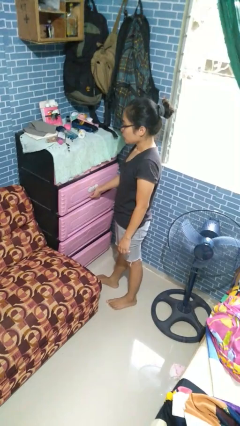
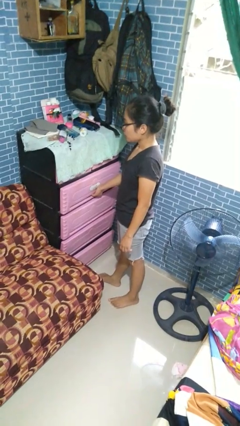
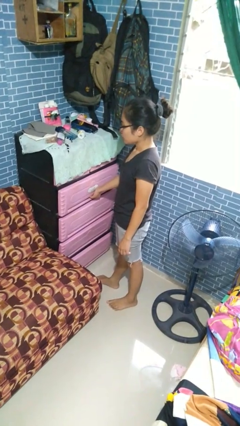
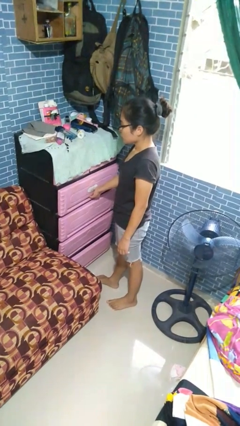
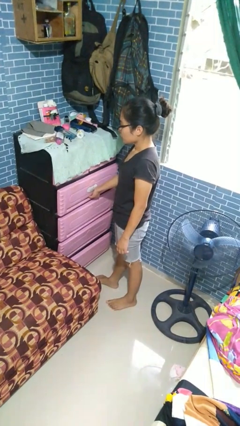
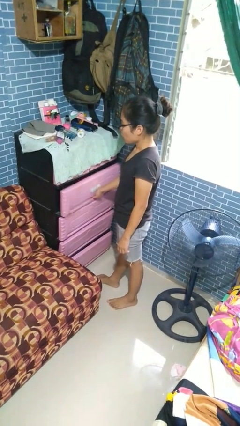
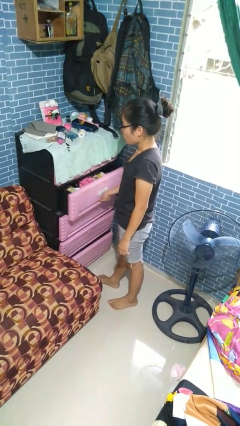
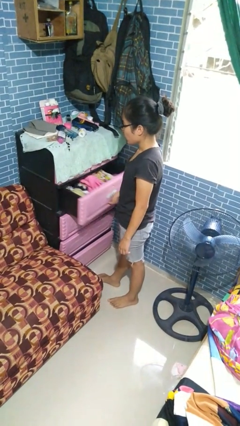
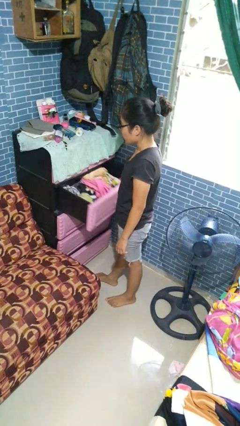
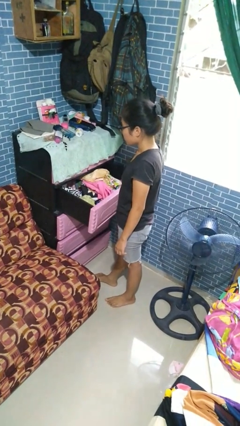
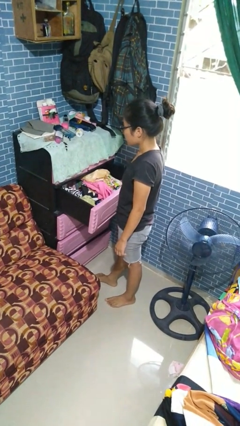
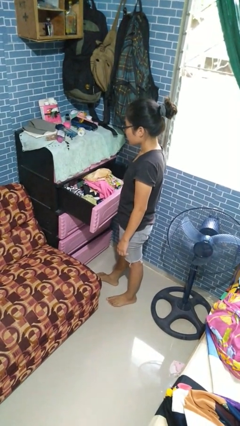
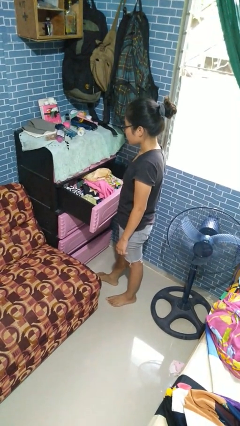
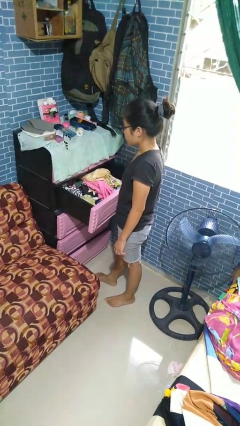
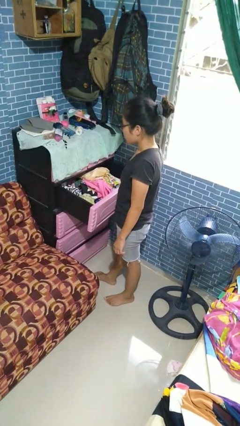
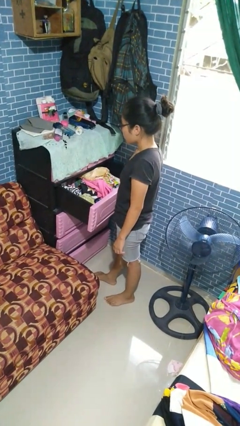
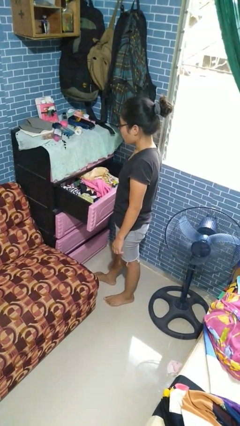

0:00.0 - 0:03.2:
person opens dresser drawer

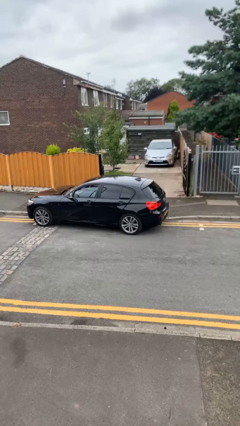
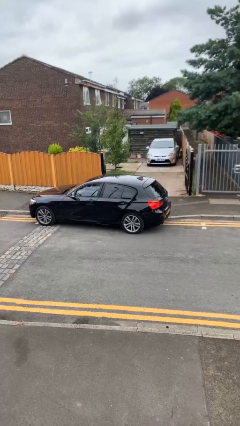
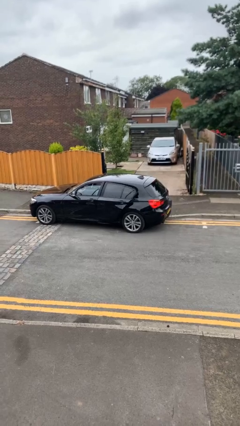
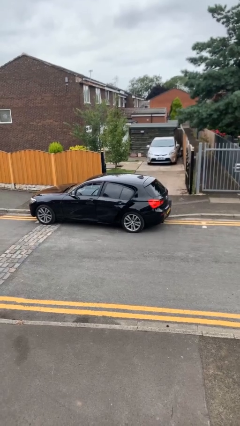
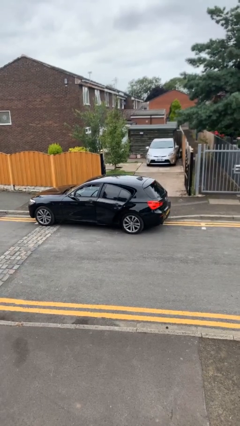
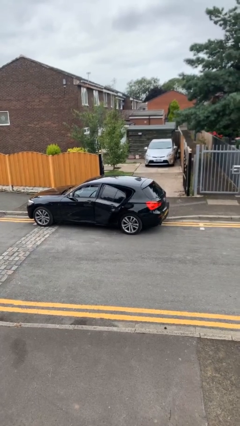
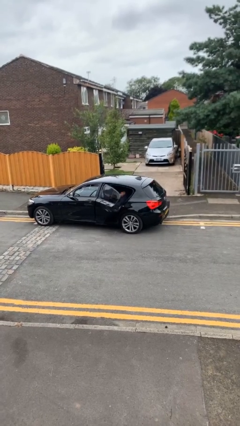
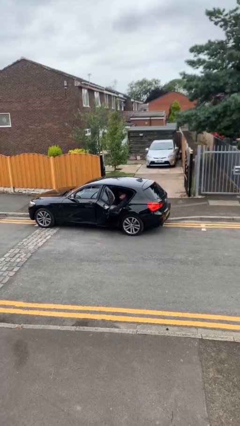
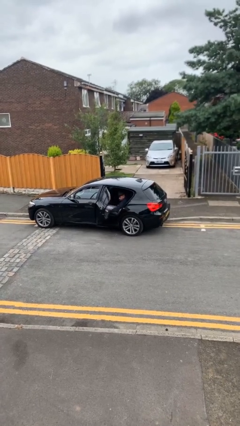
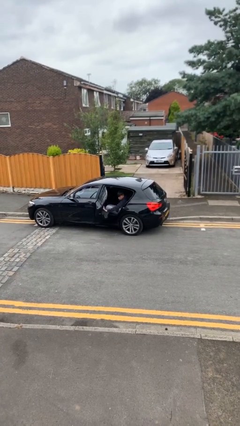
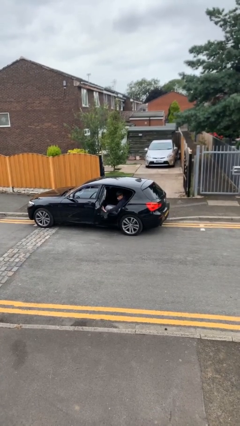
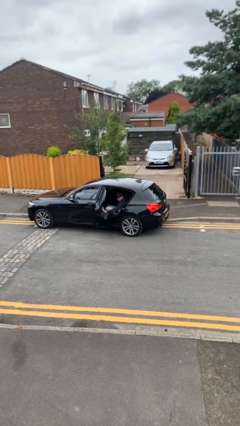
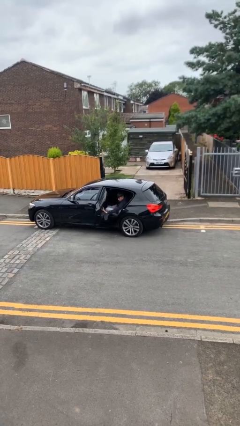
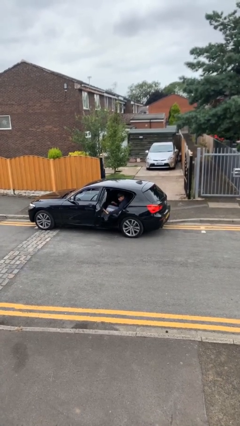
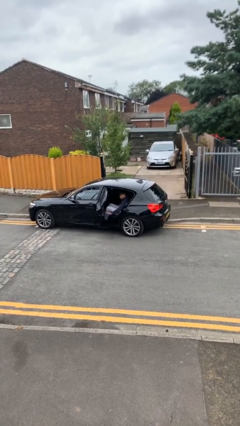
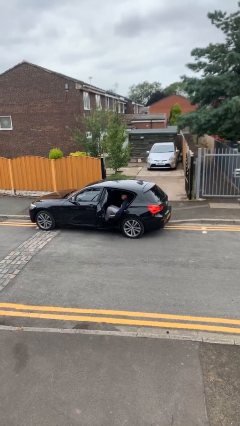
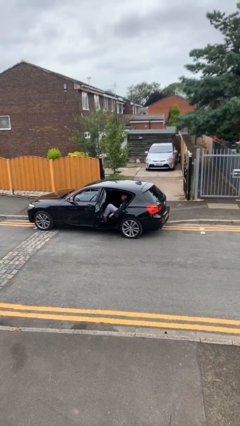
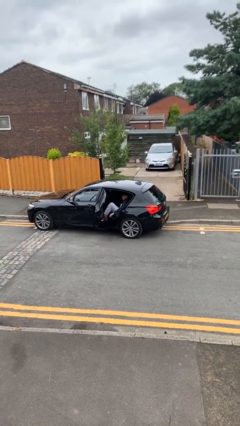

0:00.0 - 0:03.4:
person opens car door

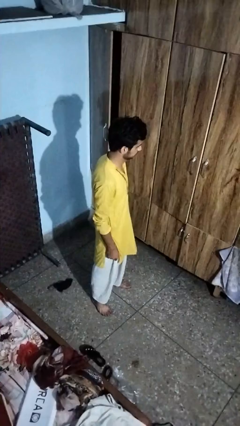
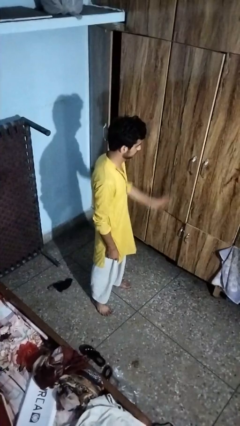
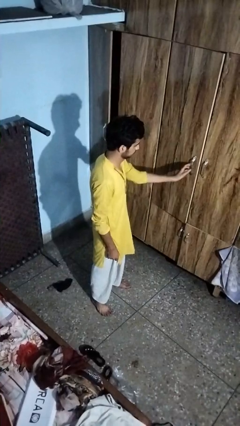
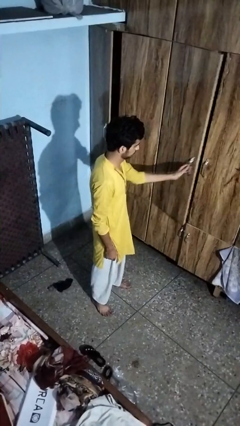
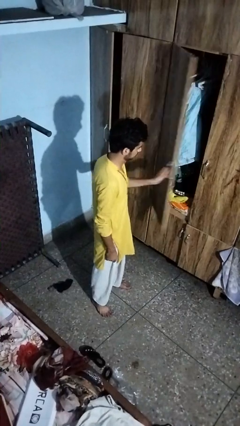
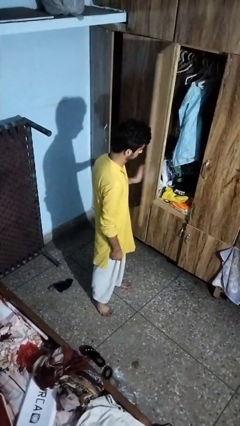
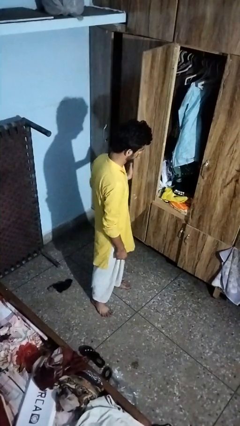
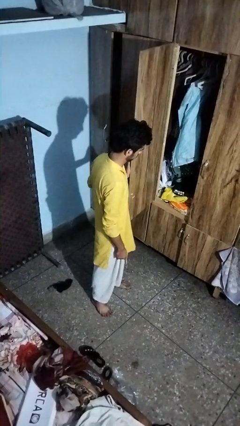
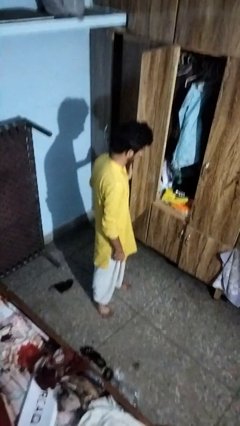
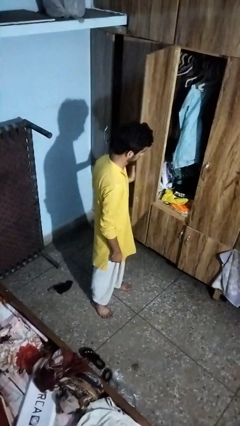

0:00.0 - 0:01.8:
person opens closet door

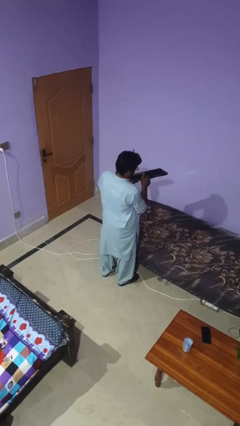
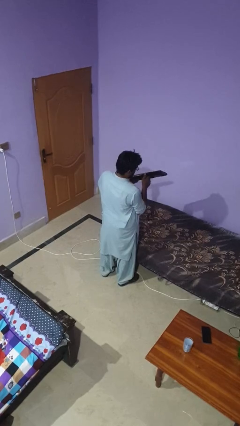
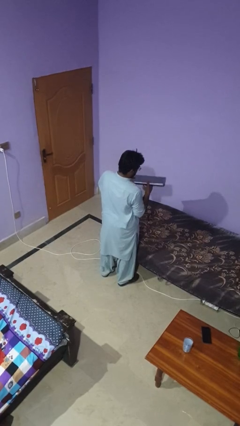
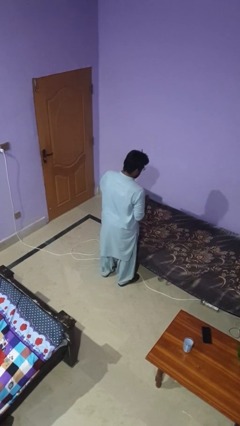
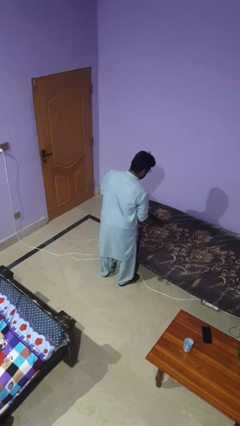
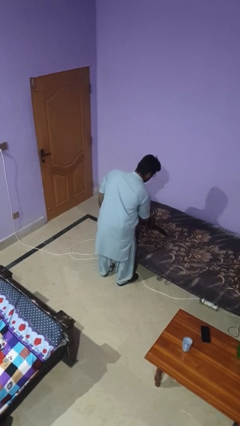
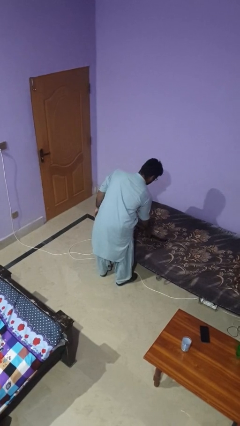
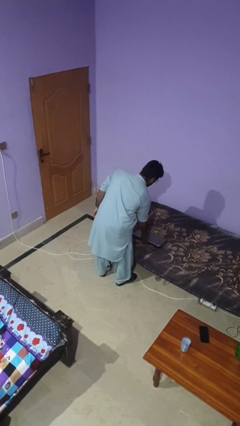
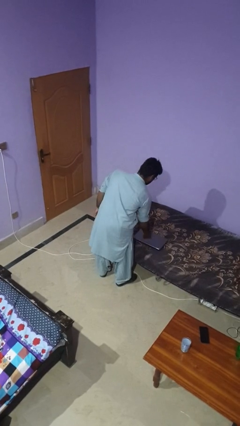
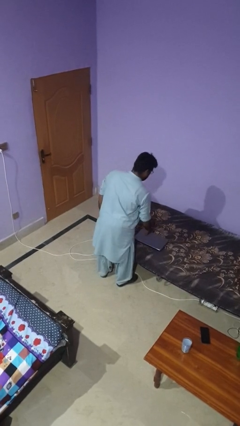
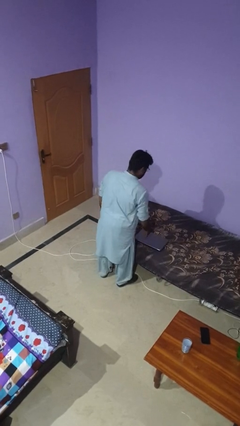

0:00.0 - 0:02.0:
person puts down object on bed

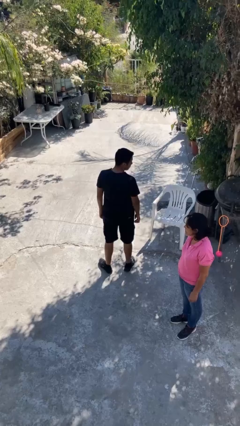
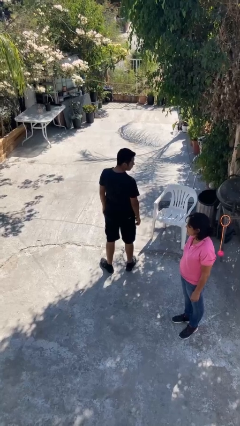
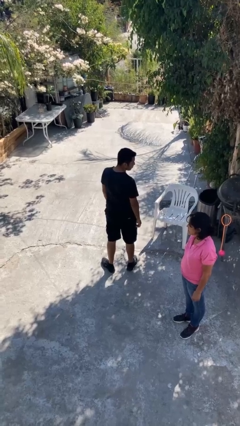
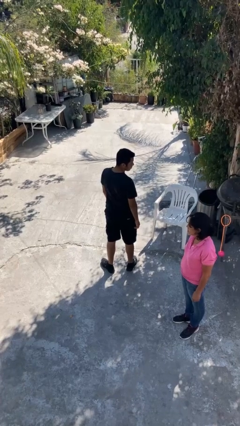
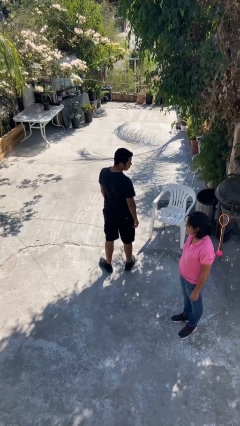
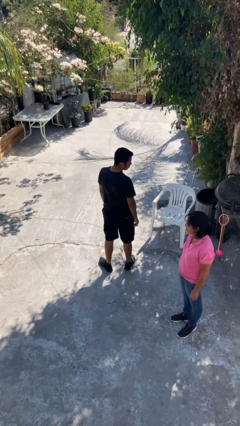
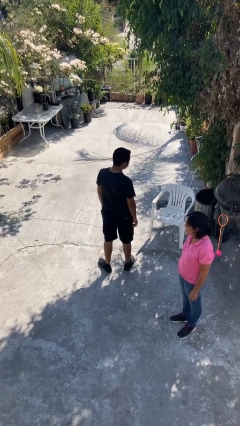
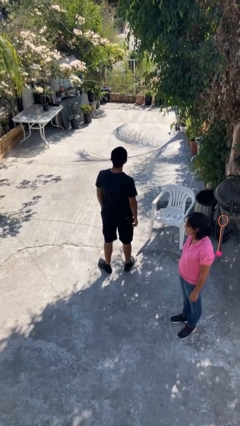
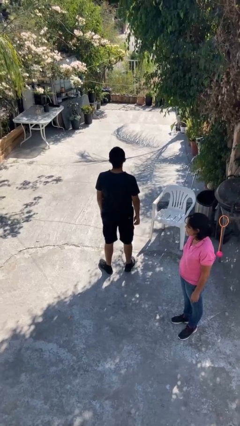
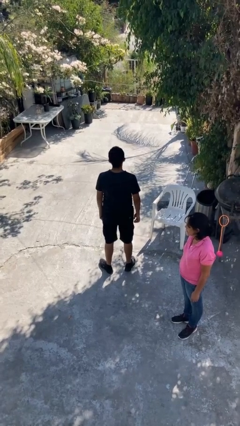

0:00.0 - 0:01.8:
person looks over shoulder

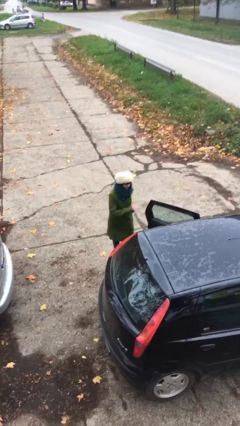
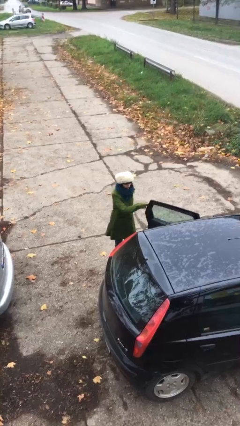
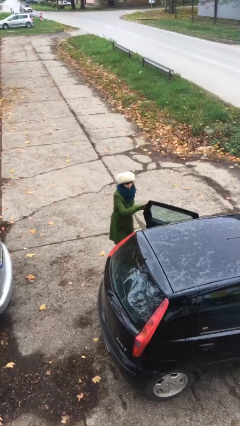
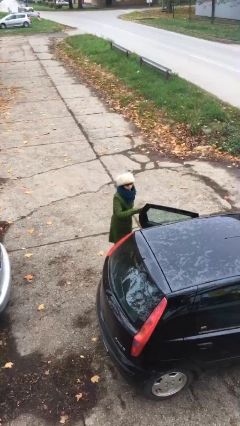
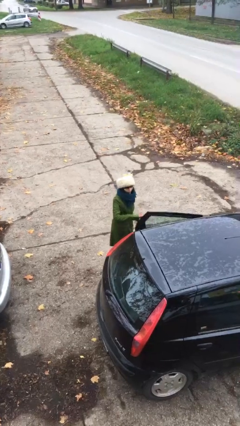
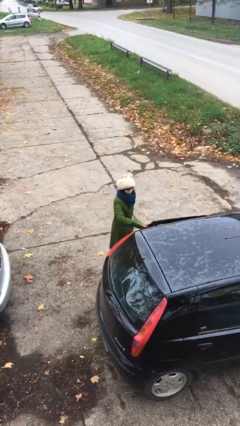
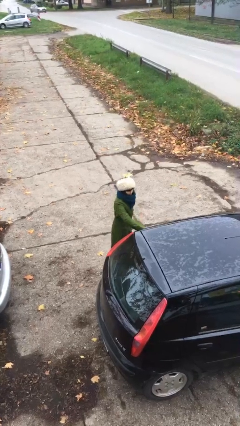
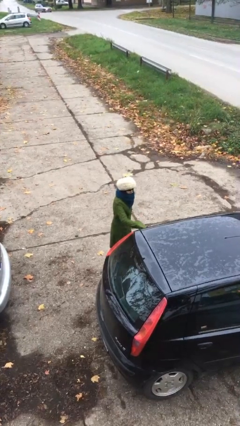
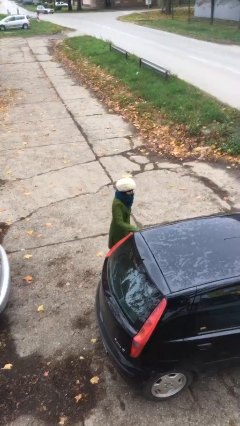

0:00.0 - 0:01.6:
person closes car door

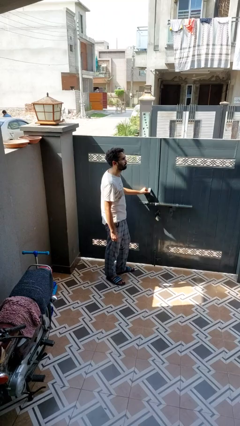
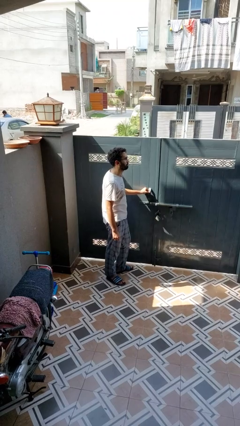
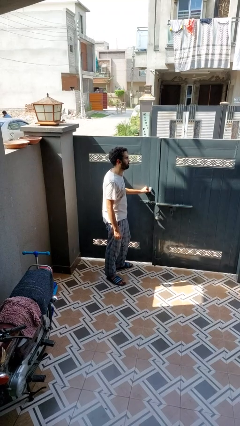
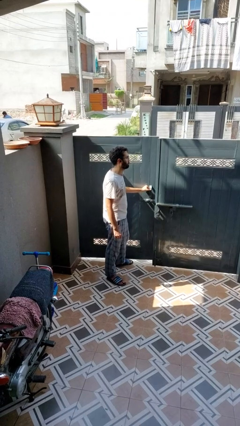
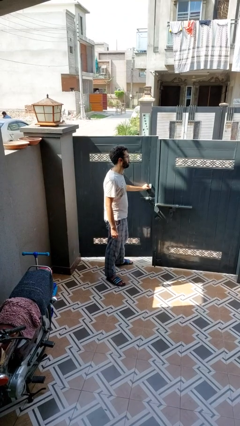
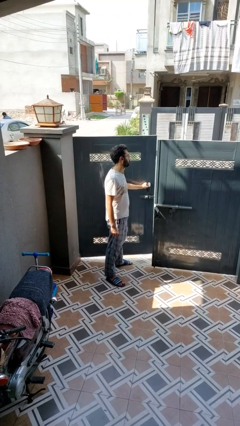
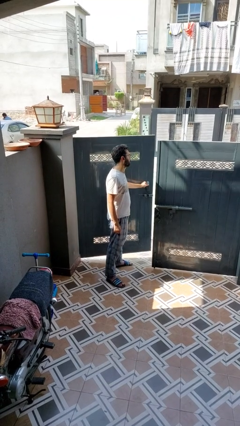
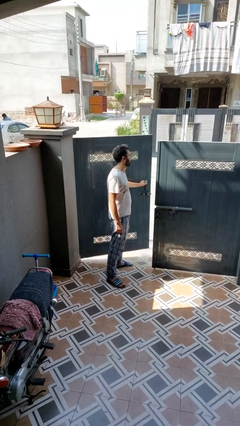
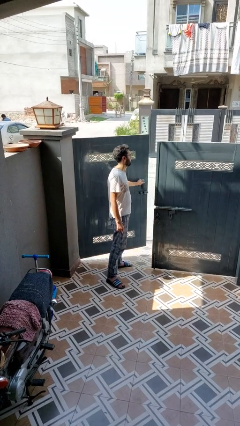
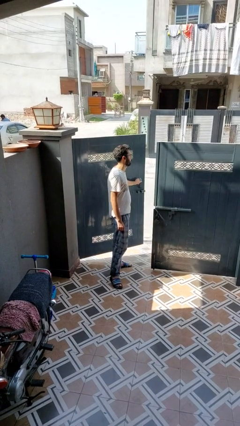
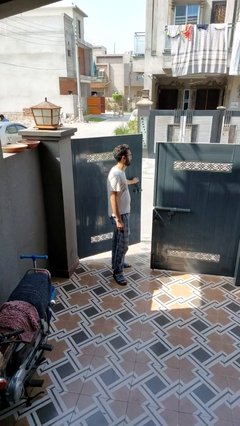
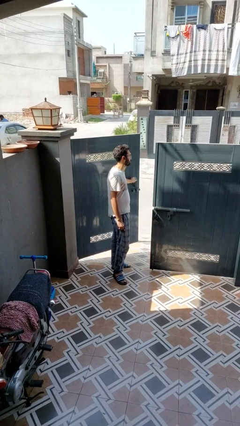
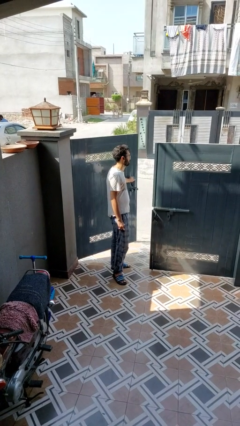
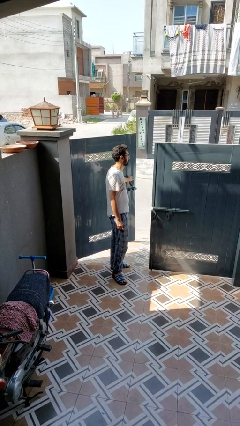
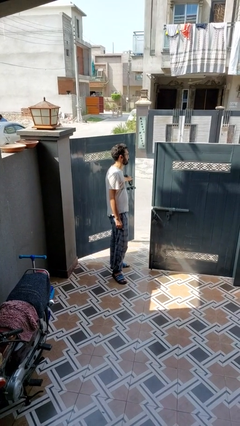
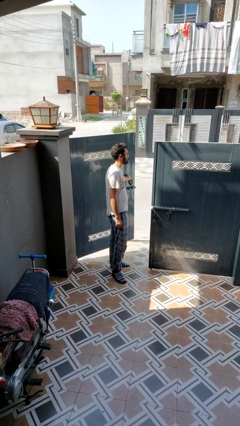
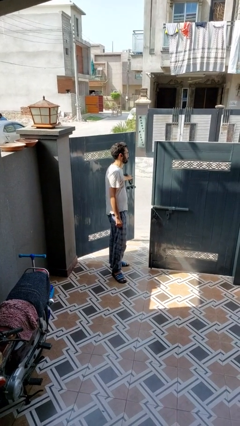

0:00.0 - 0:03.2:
person opens gate
